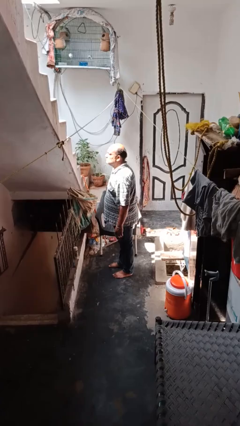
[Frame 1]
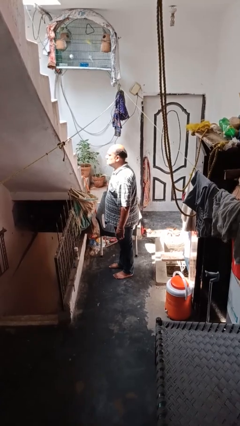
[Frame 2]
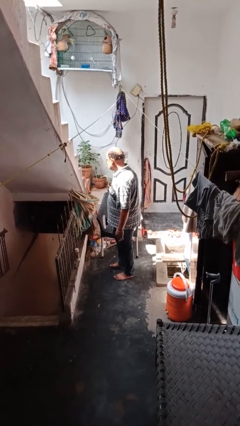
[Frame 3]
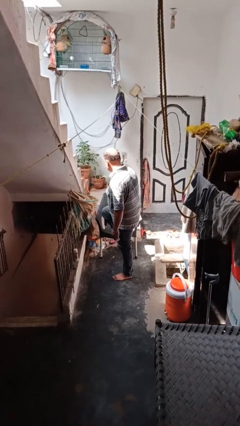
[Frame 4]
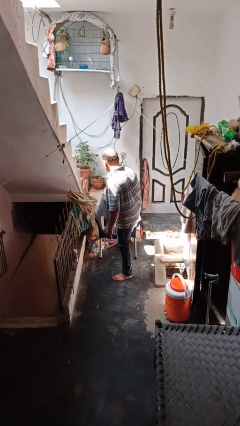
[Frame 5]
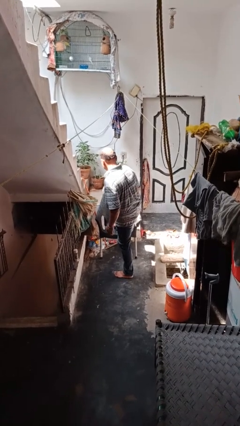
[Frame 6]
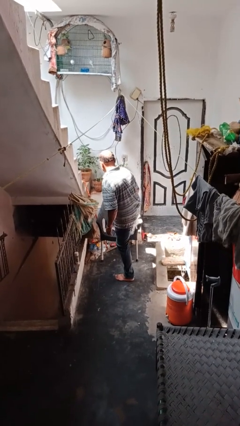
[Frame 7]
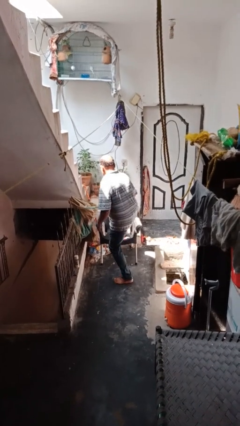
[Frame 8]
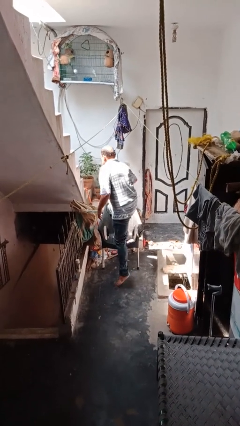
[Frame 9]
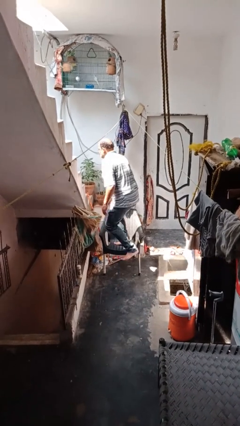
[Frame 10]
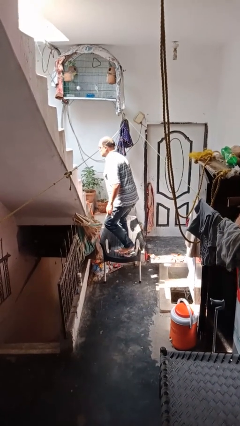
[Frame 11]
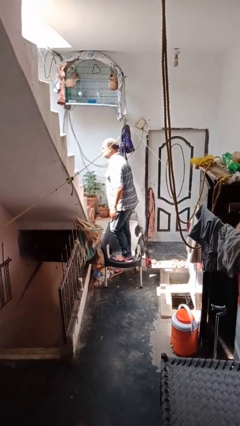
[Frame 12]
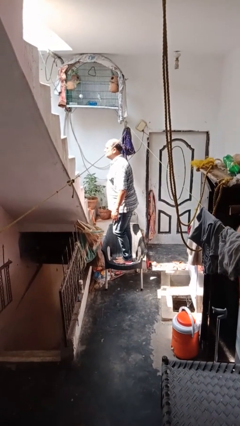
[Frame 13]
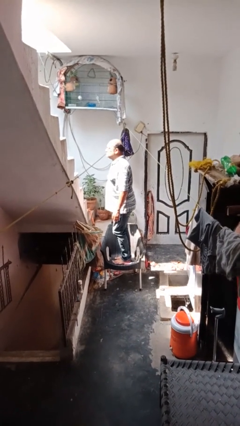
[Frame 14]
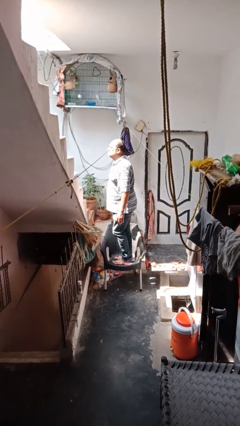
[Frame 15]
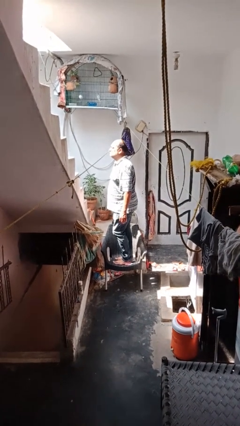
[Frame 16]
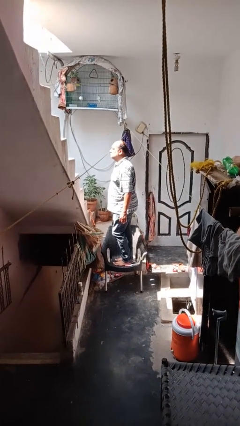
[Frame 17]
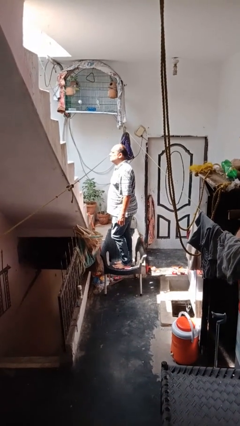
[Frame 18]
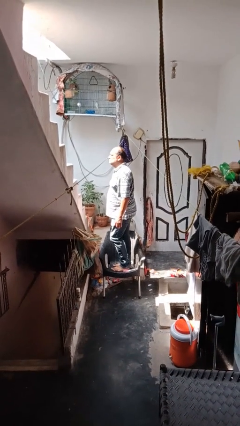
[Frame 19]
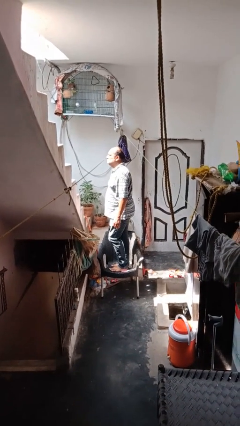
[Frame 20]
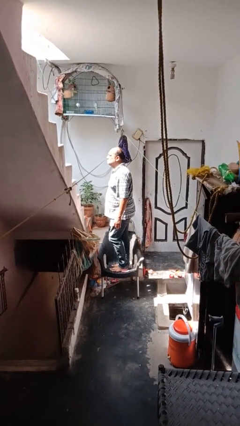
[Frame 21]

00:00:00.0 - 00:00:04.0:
person climbs on chair

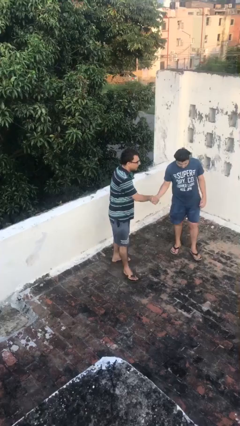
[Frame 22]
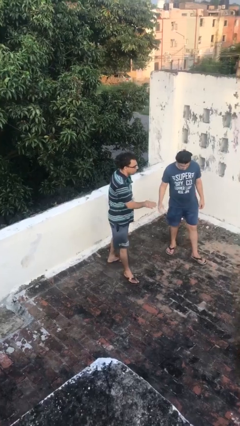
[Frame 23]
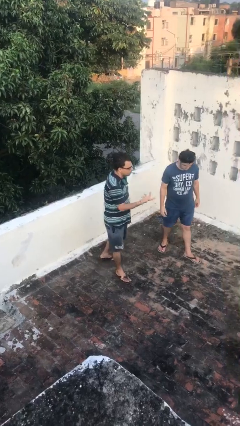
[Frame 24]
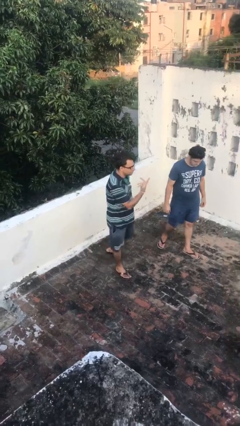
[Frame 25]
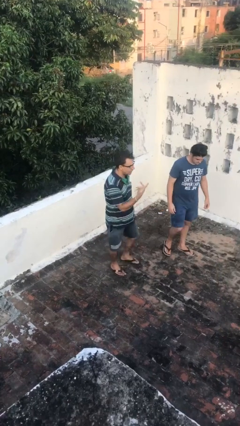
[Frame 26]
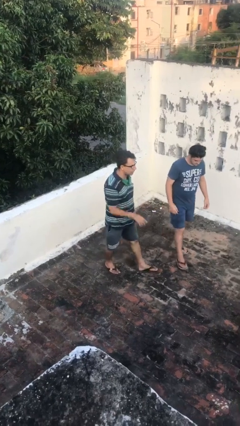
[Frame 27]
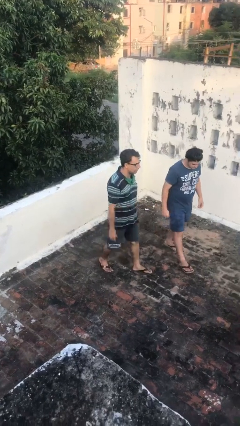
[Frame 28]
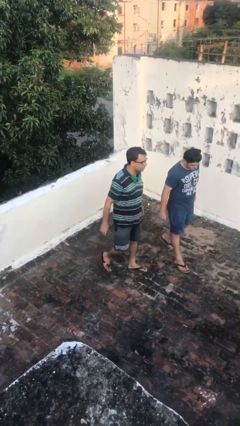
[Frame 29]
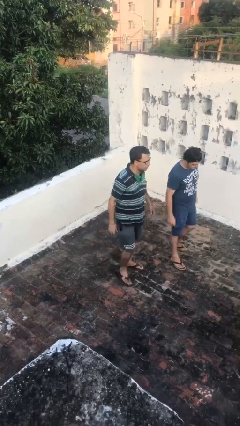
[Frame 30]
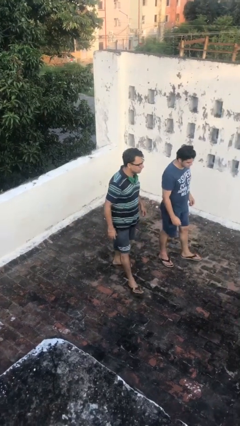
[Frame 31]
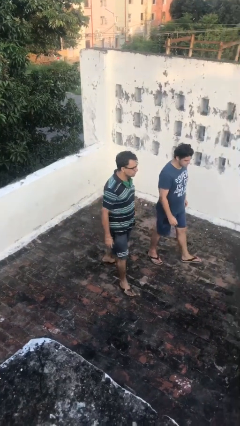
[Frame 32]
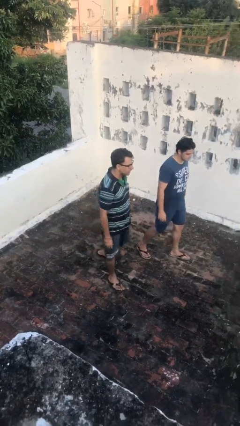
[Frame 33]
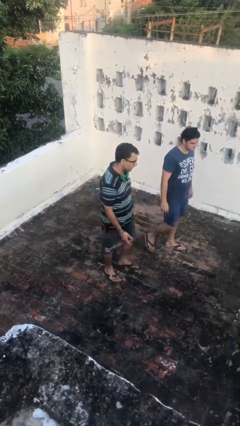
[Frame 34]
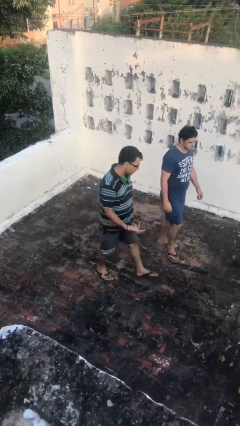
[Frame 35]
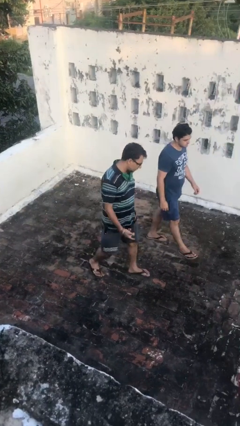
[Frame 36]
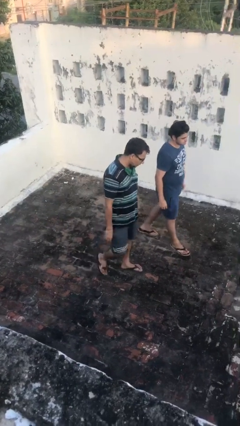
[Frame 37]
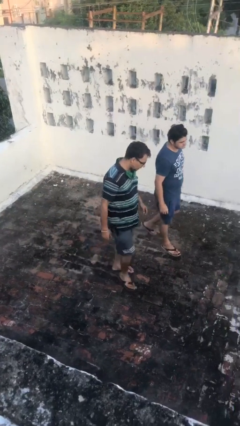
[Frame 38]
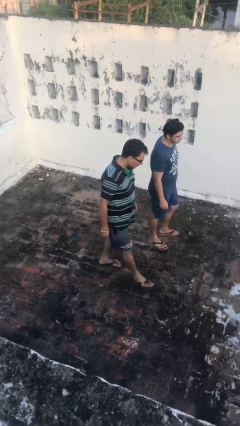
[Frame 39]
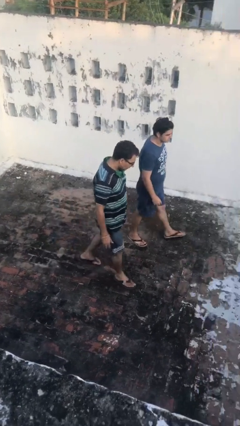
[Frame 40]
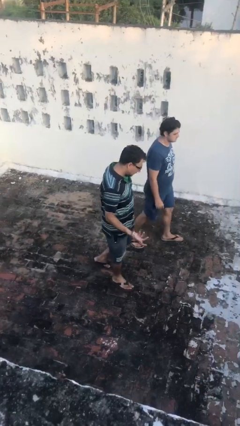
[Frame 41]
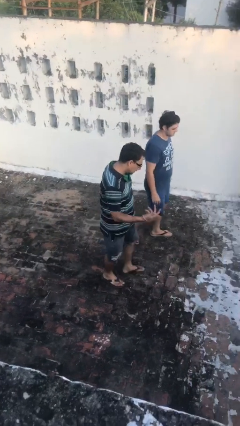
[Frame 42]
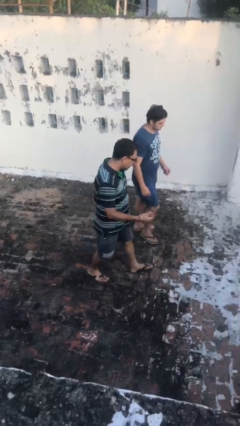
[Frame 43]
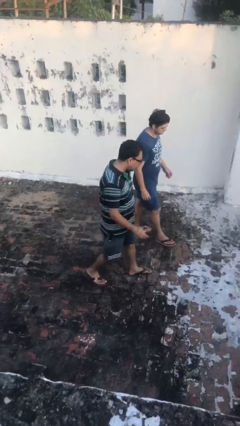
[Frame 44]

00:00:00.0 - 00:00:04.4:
person talks to person

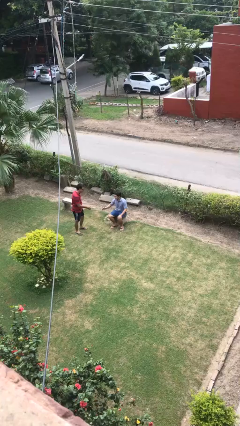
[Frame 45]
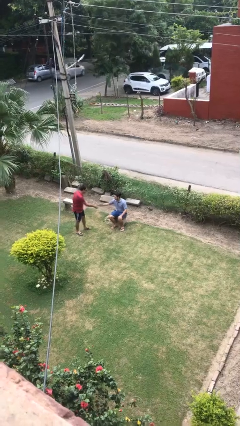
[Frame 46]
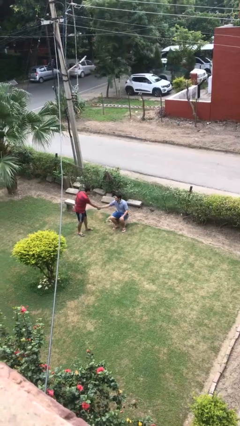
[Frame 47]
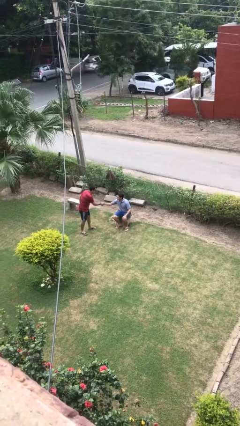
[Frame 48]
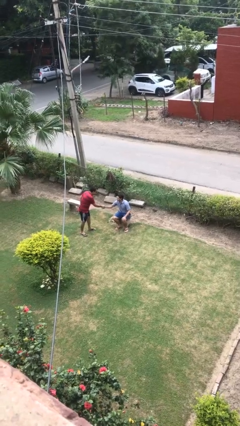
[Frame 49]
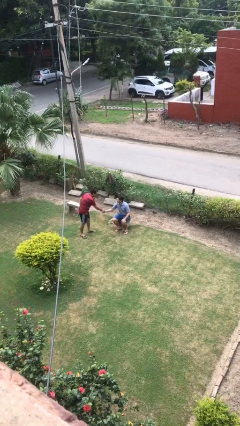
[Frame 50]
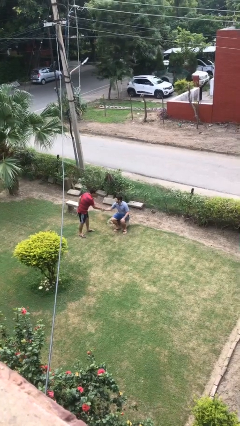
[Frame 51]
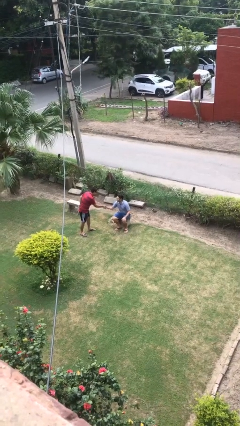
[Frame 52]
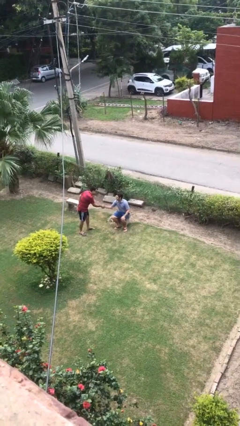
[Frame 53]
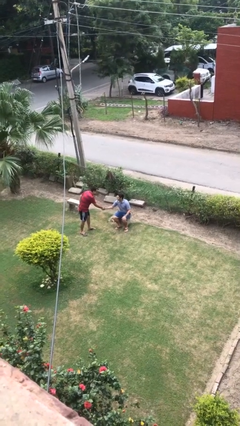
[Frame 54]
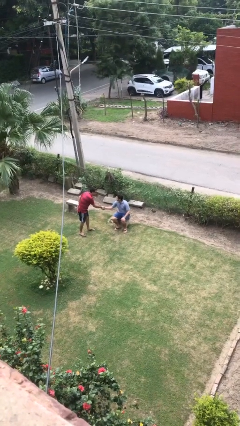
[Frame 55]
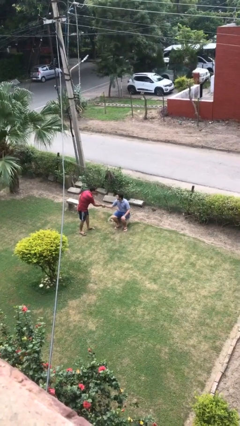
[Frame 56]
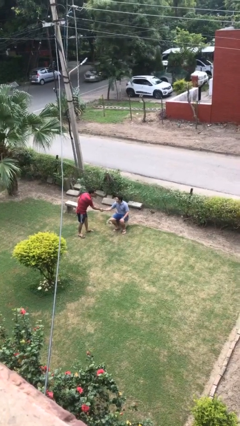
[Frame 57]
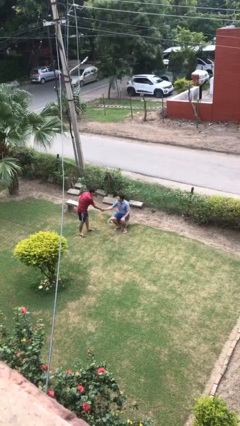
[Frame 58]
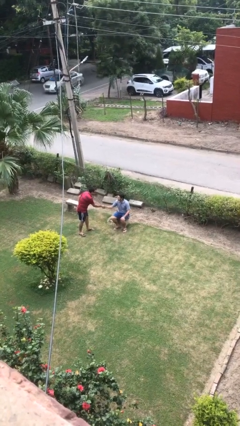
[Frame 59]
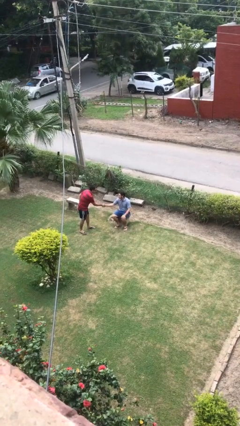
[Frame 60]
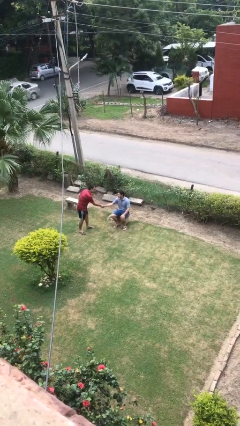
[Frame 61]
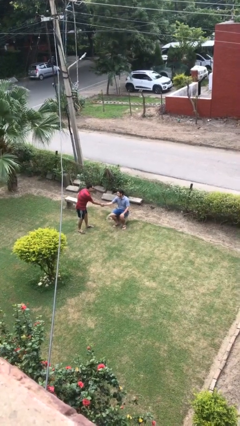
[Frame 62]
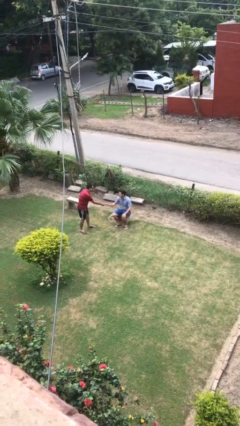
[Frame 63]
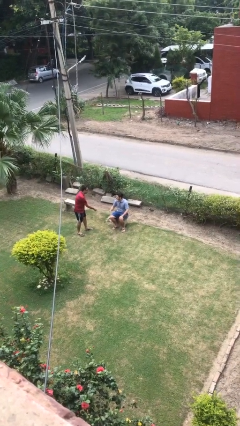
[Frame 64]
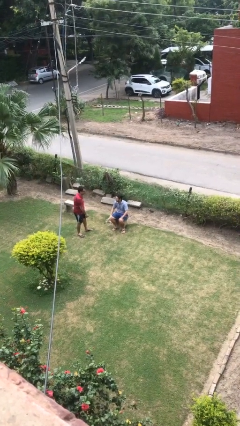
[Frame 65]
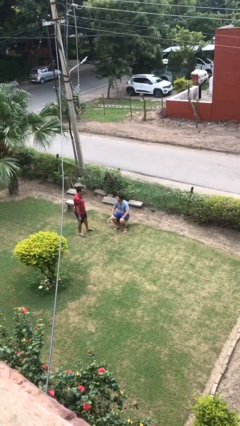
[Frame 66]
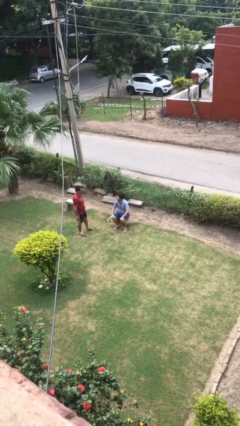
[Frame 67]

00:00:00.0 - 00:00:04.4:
person shakes hand

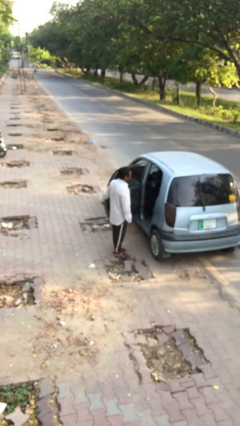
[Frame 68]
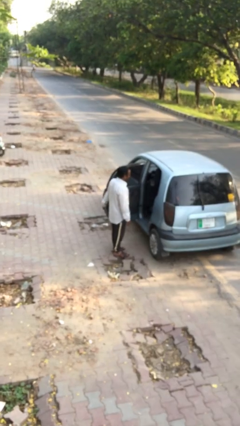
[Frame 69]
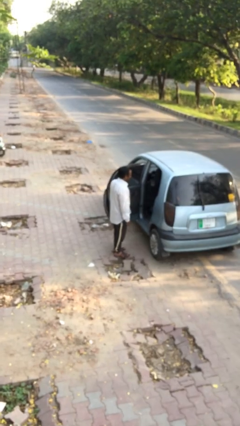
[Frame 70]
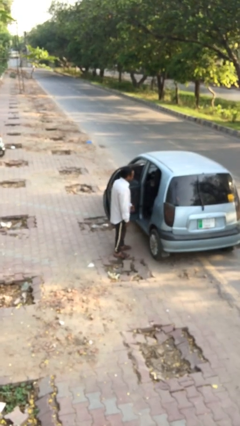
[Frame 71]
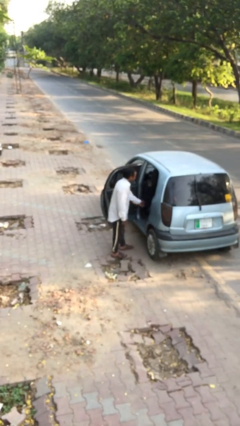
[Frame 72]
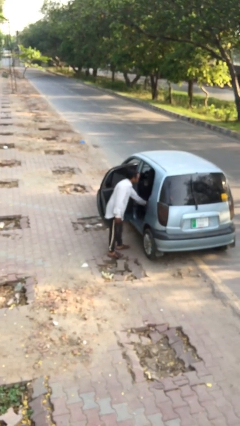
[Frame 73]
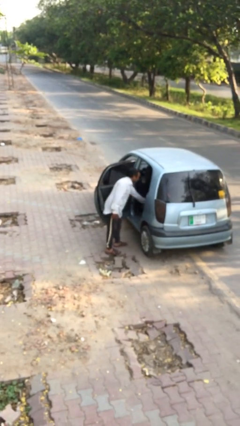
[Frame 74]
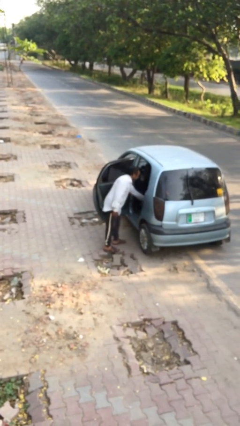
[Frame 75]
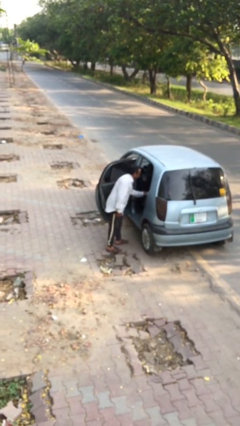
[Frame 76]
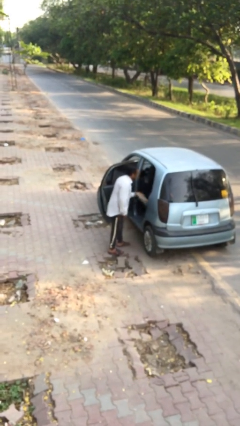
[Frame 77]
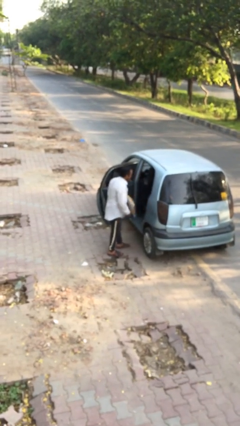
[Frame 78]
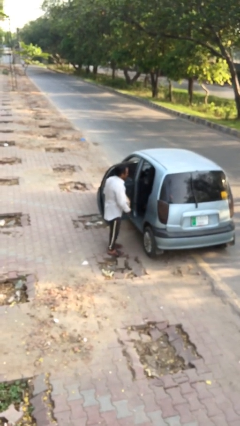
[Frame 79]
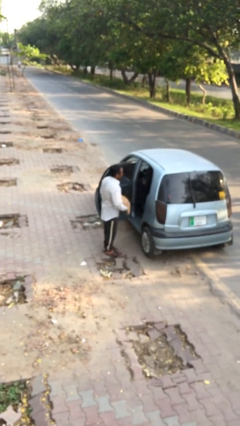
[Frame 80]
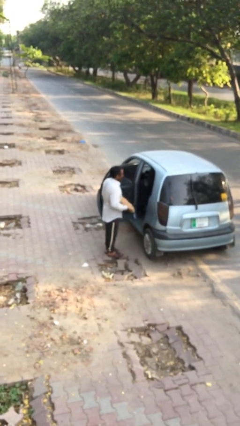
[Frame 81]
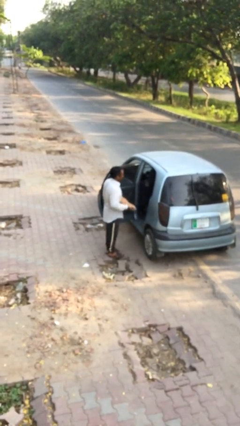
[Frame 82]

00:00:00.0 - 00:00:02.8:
person unloads car

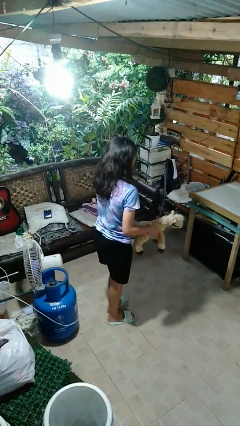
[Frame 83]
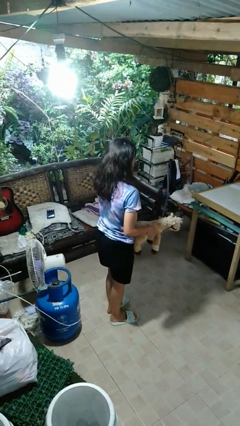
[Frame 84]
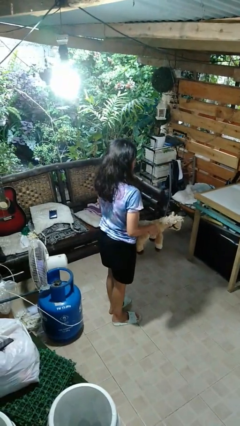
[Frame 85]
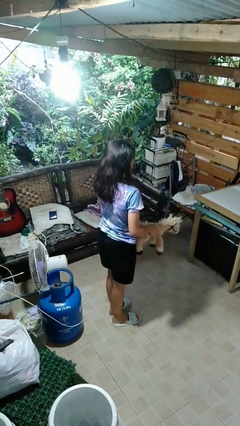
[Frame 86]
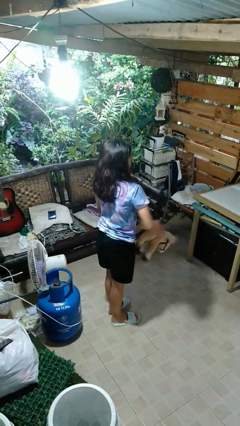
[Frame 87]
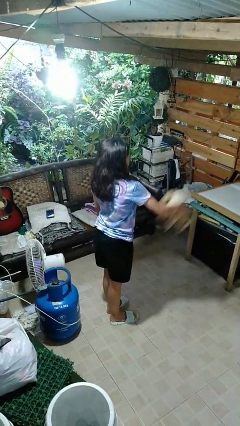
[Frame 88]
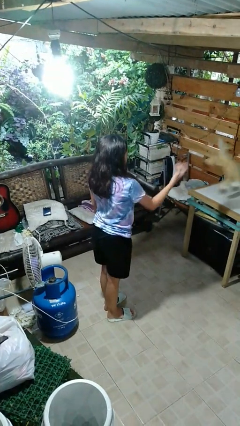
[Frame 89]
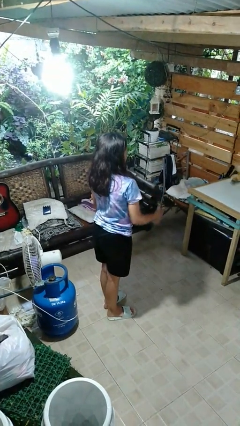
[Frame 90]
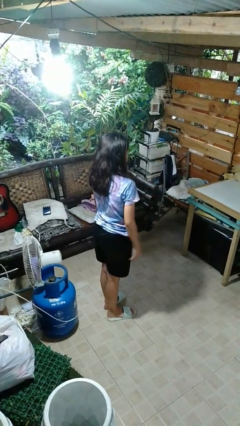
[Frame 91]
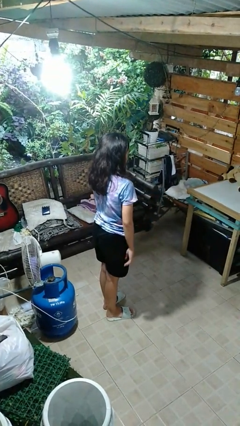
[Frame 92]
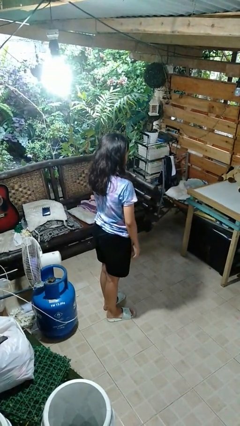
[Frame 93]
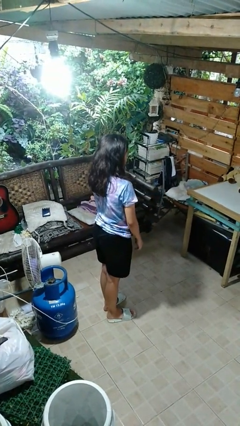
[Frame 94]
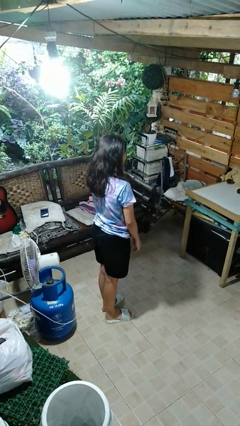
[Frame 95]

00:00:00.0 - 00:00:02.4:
person throws object on table
